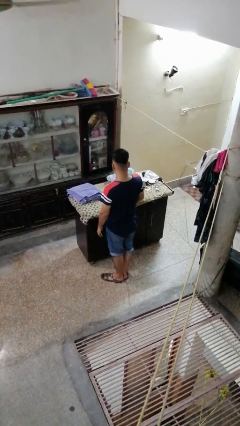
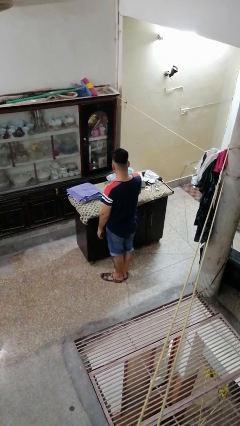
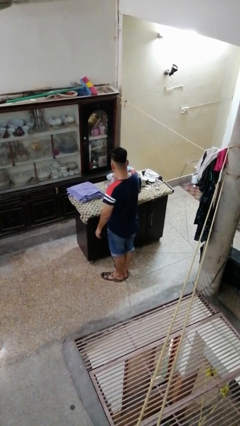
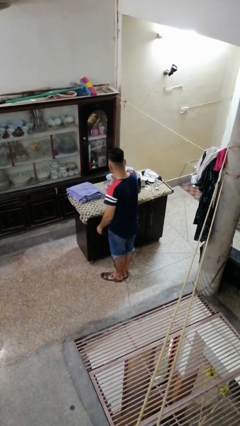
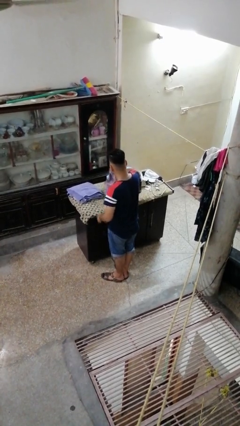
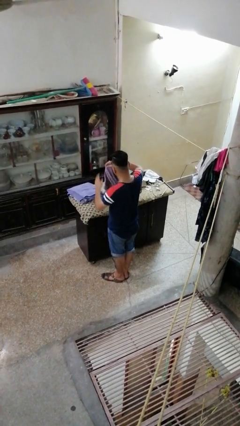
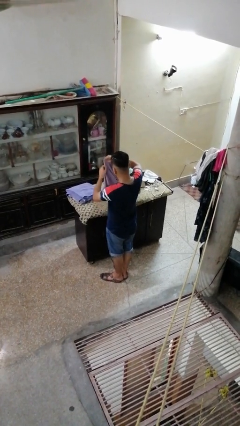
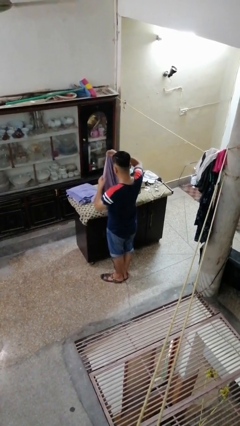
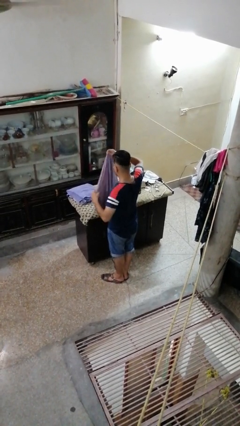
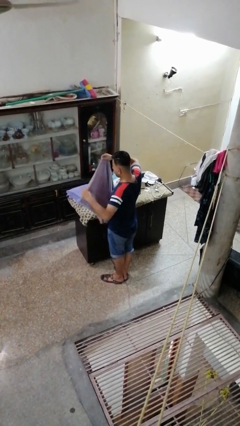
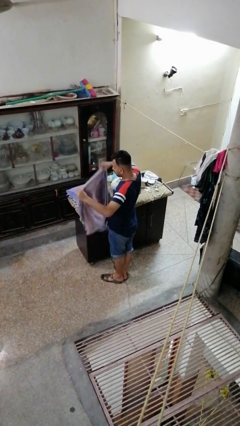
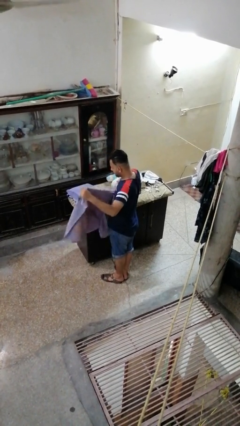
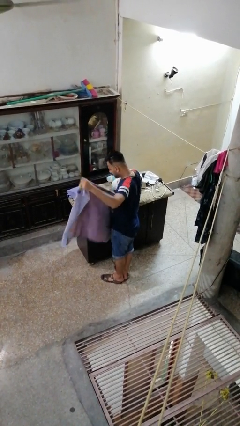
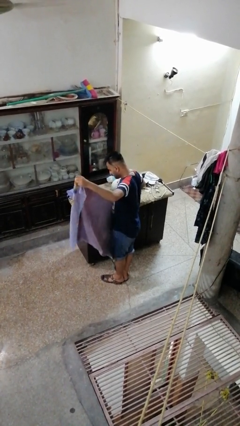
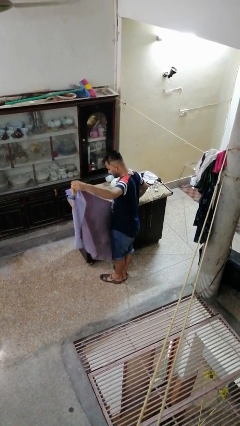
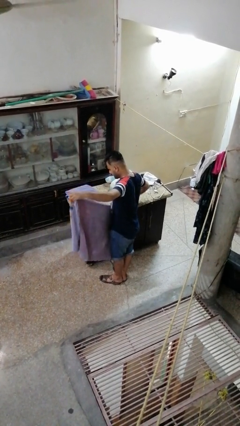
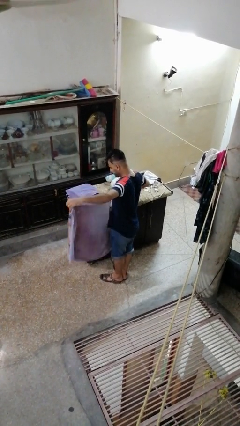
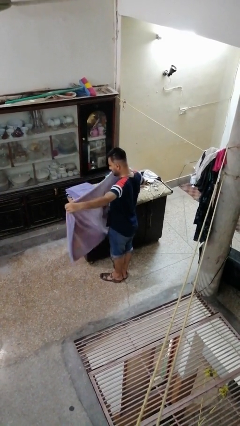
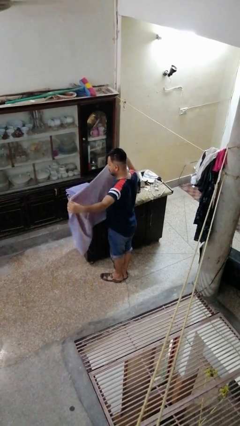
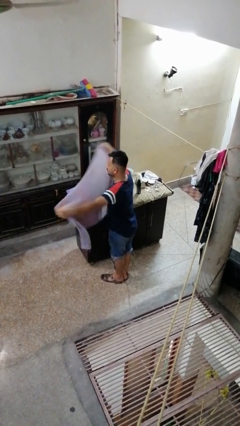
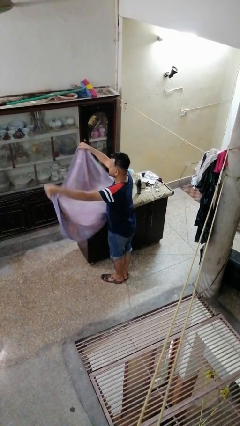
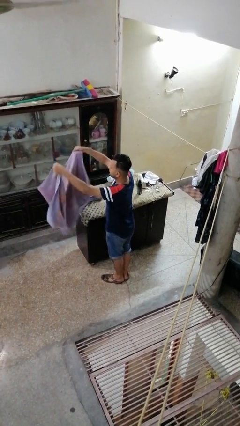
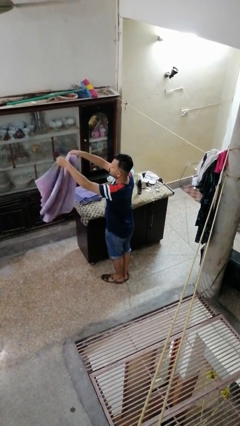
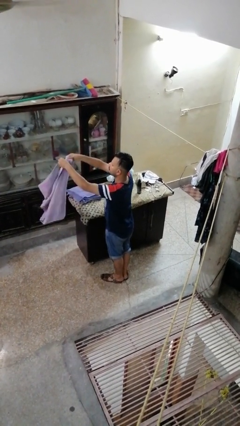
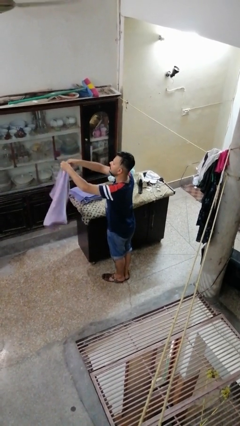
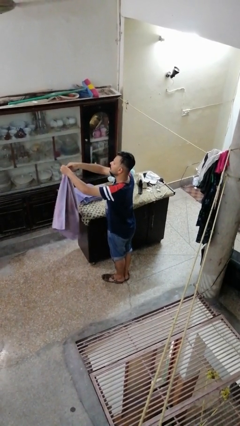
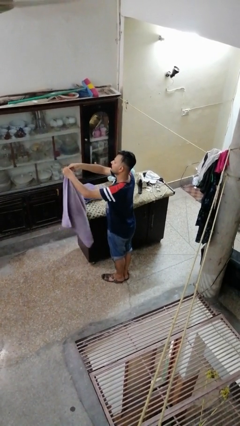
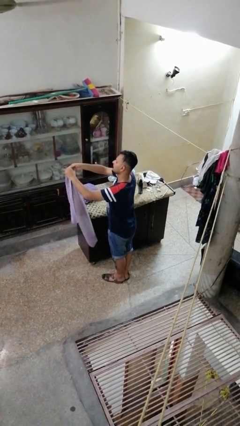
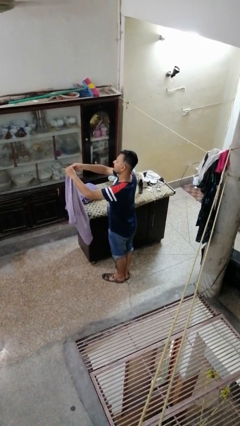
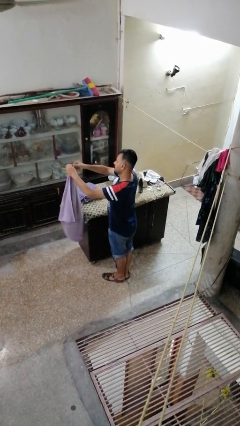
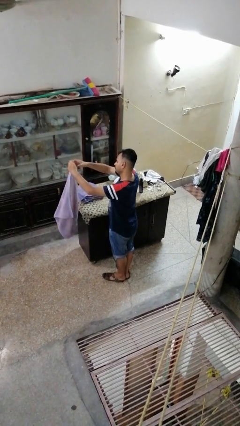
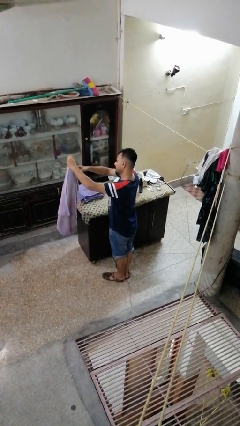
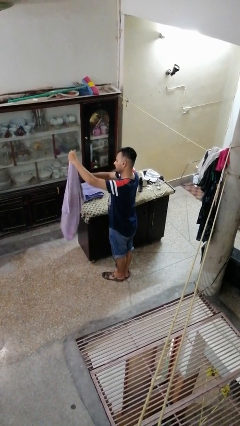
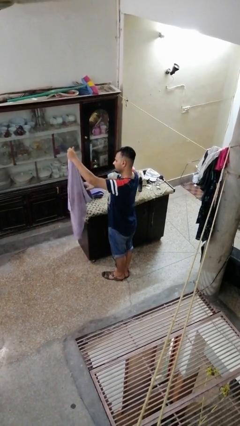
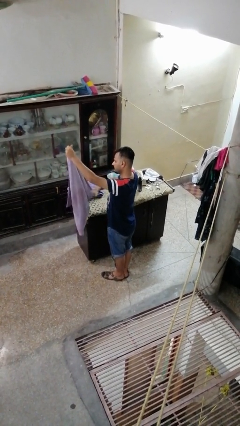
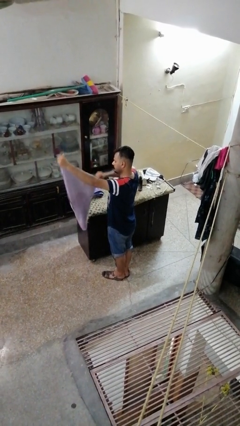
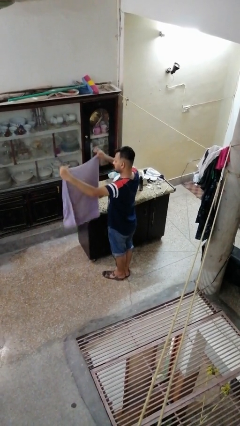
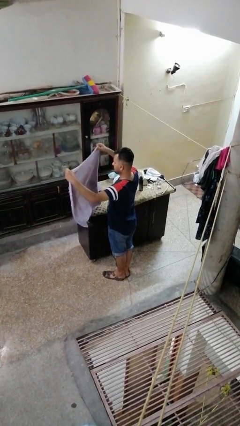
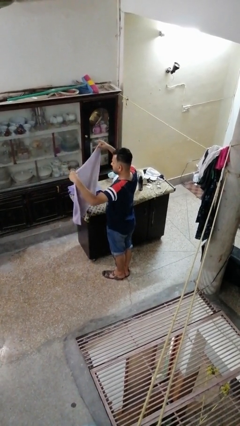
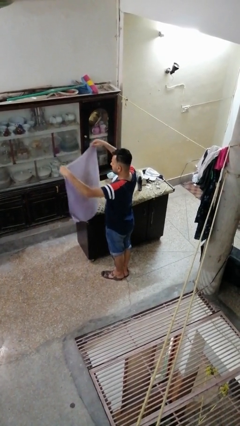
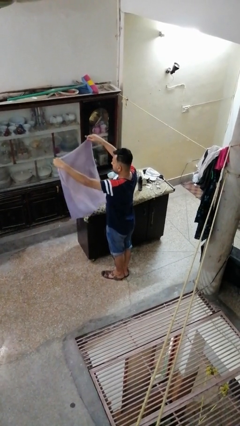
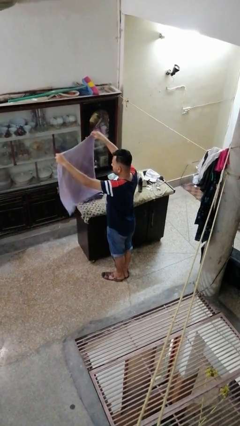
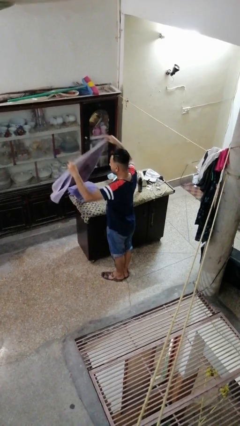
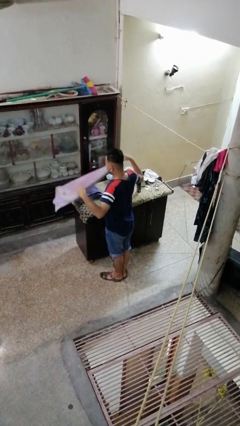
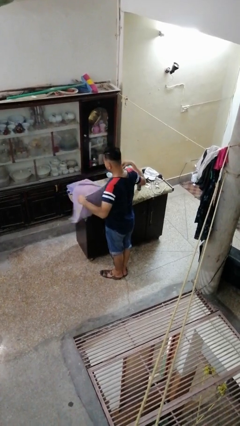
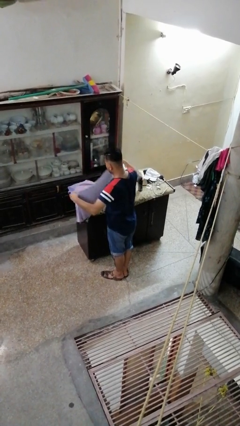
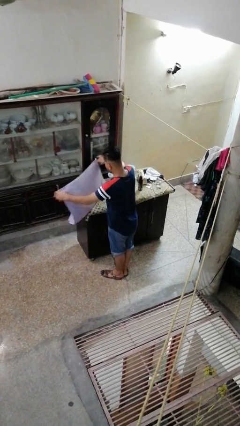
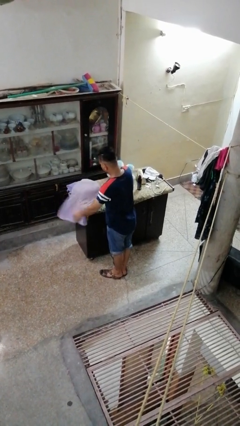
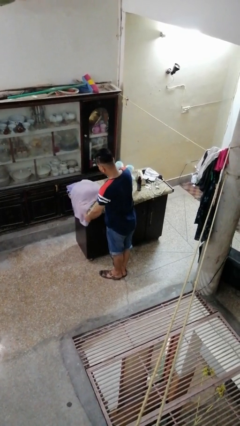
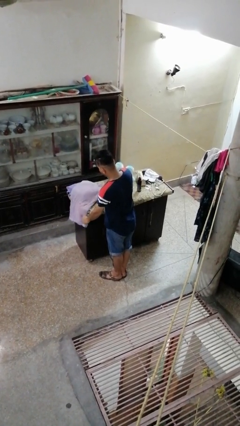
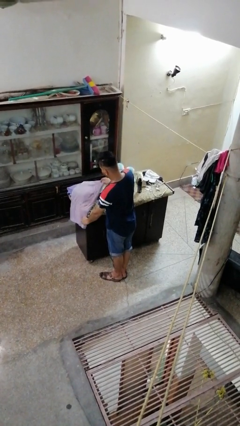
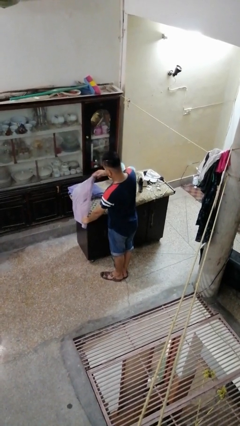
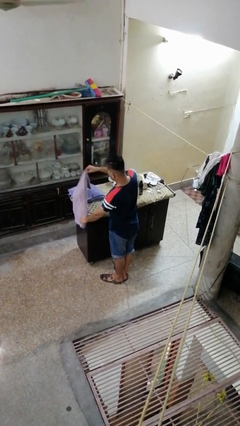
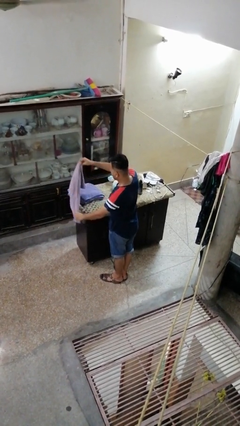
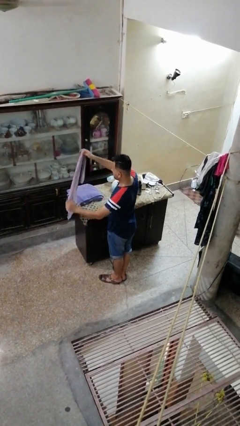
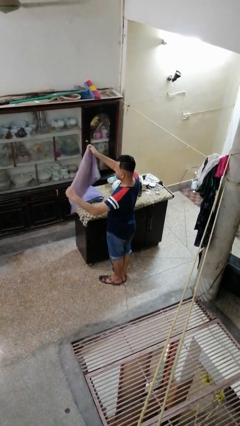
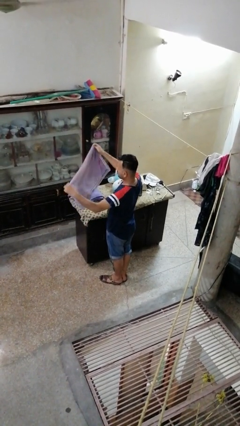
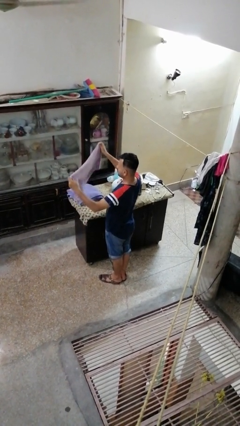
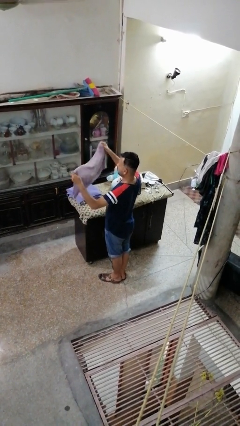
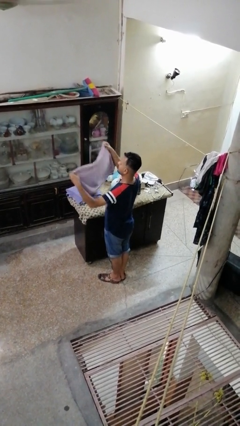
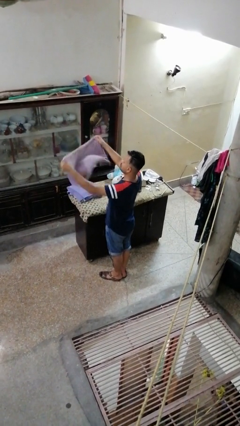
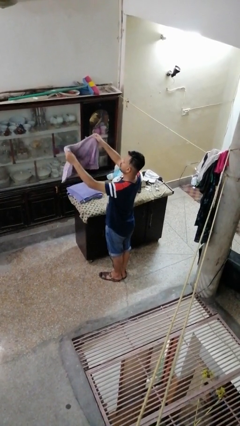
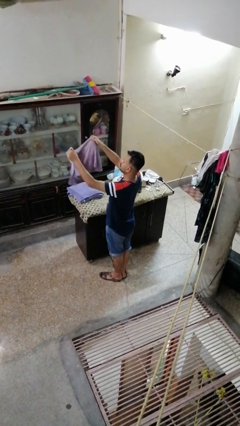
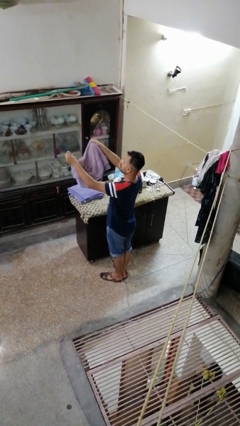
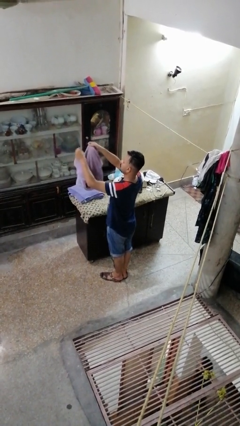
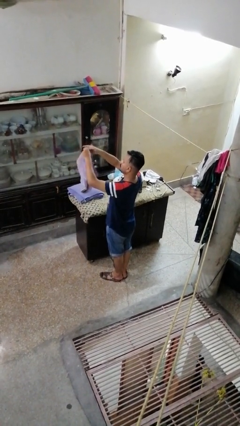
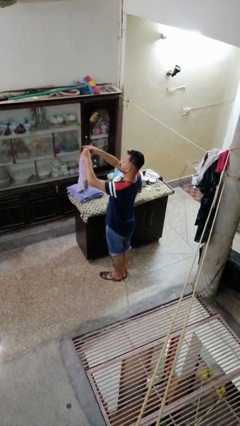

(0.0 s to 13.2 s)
person folds towel

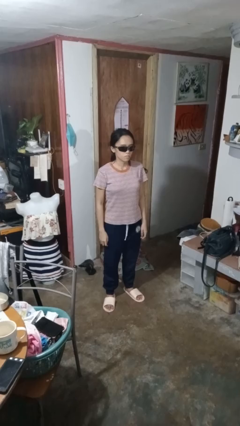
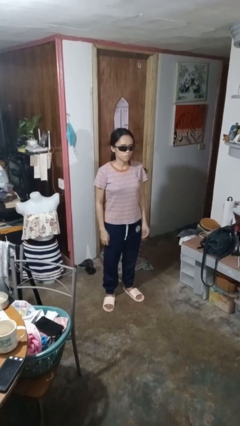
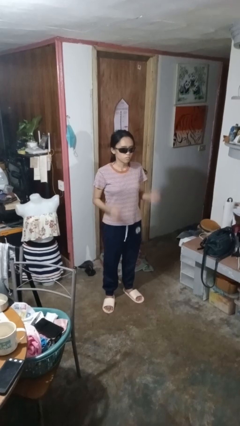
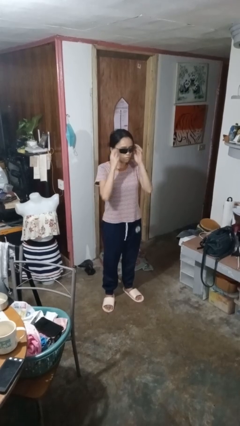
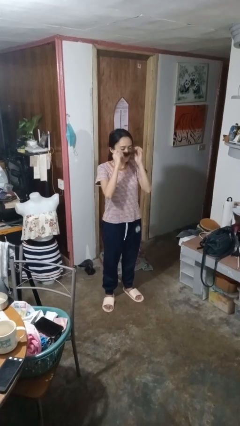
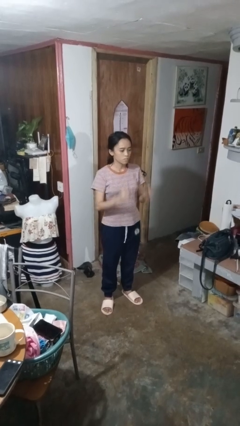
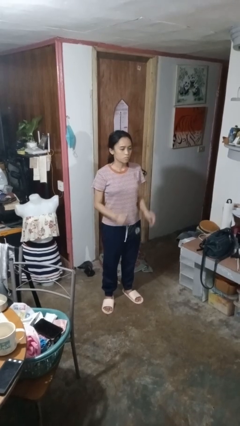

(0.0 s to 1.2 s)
person takes off sunglasses

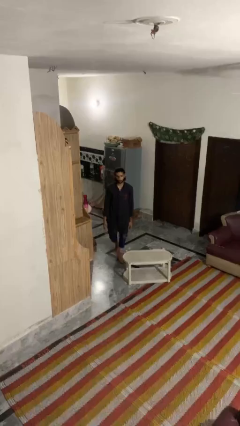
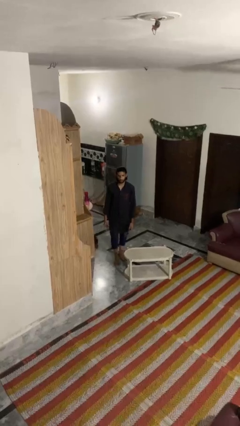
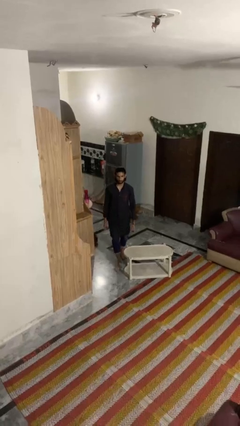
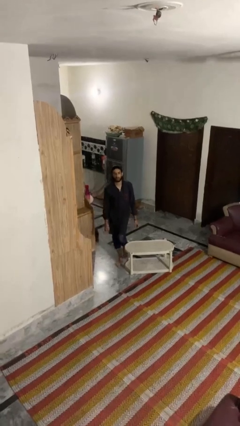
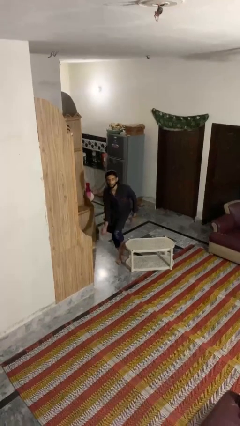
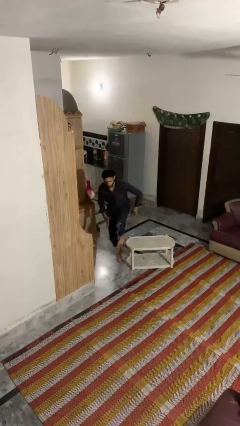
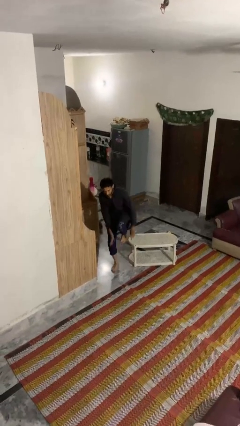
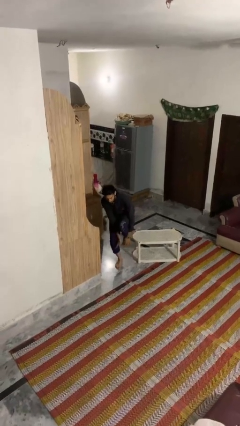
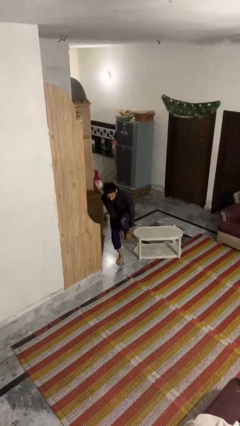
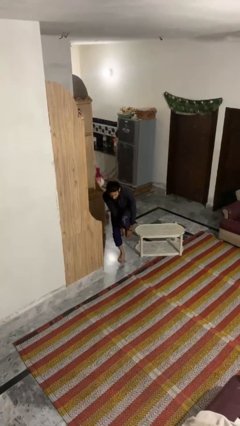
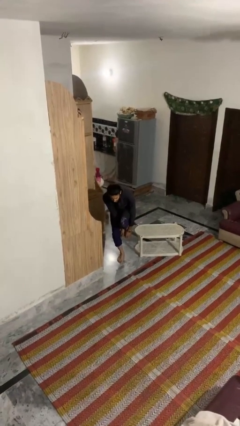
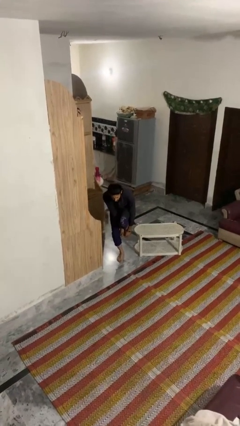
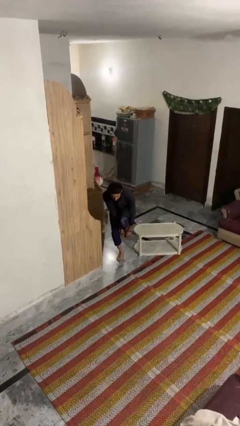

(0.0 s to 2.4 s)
person bumps into table

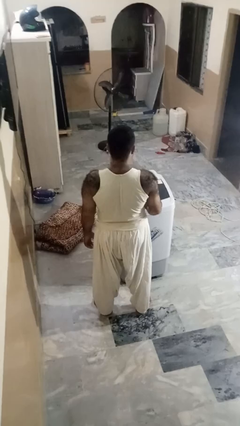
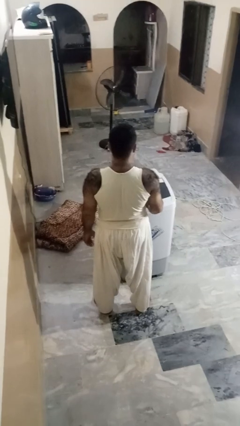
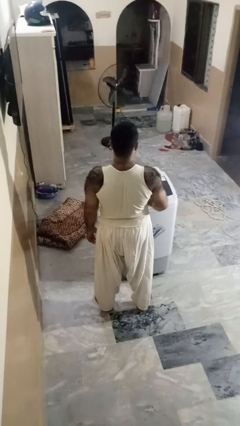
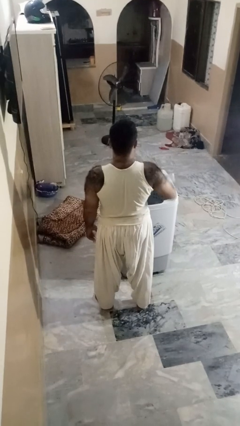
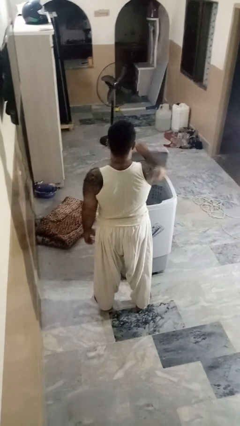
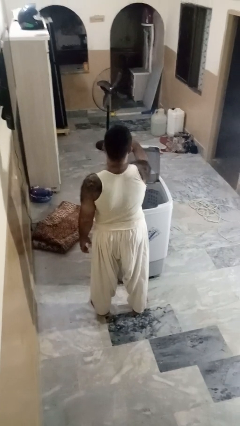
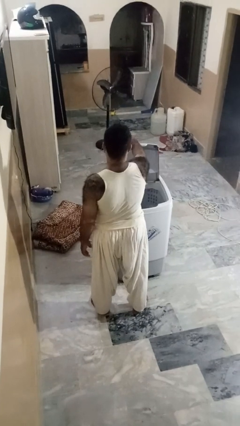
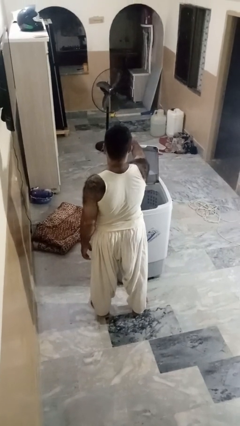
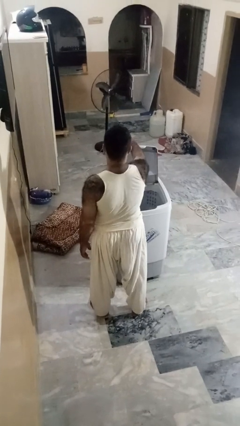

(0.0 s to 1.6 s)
person opens clothes washer
